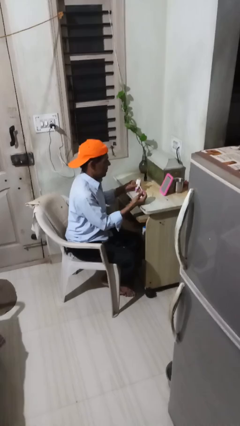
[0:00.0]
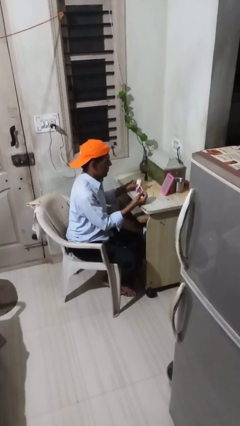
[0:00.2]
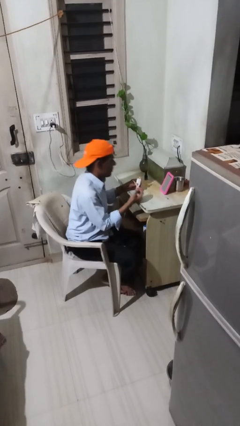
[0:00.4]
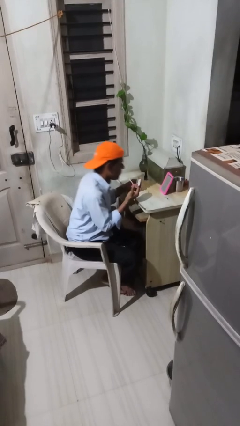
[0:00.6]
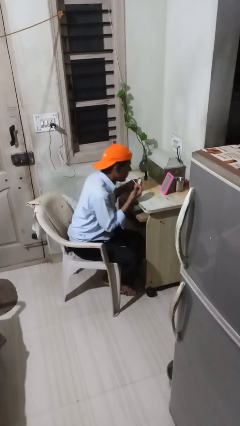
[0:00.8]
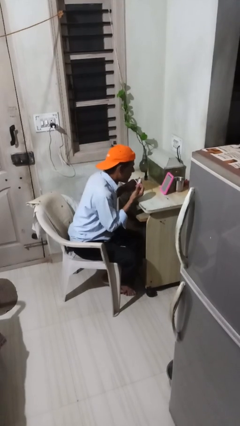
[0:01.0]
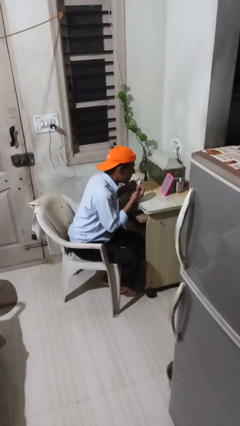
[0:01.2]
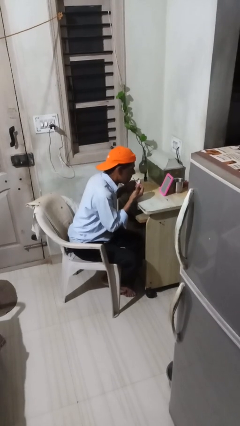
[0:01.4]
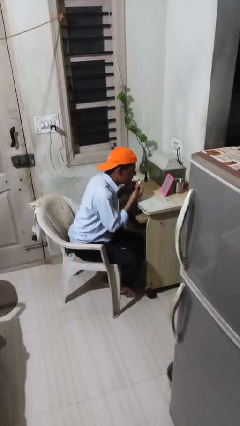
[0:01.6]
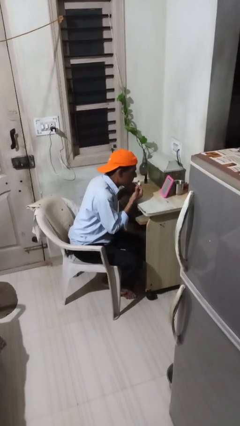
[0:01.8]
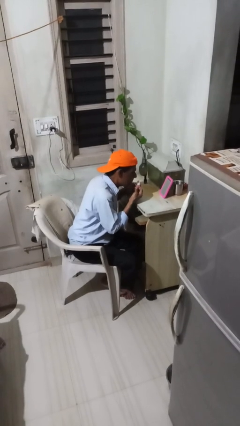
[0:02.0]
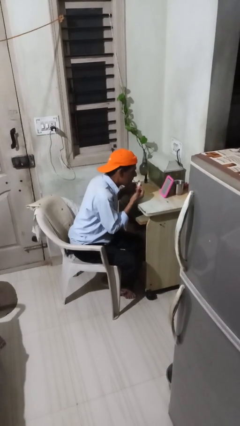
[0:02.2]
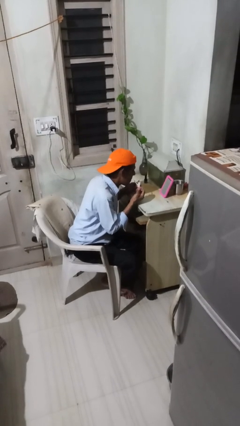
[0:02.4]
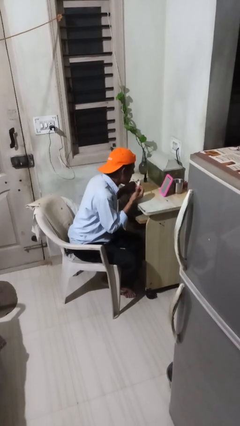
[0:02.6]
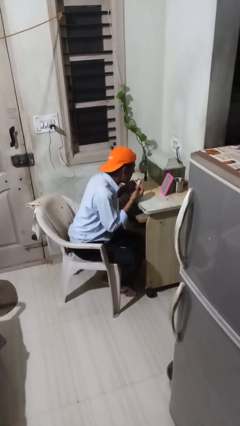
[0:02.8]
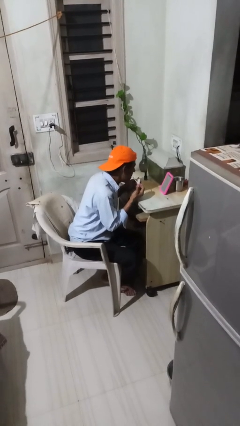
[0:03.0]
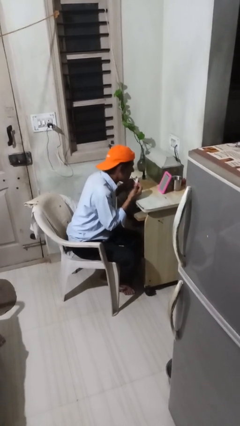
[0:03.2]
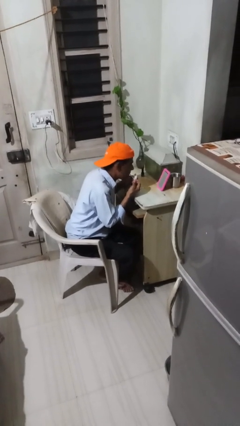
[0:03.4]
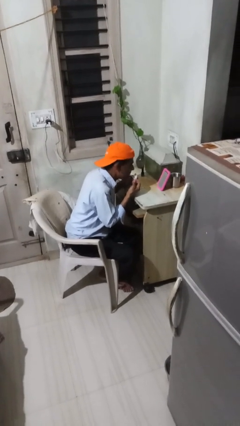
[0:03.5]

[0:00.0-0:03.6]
person applies lip makeup

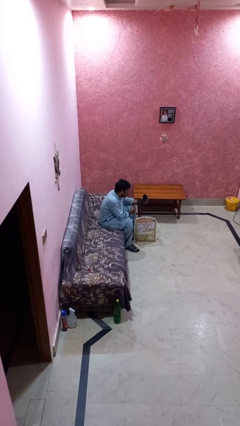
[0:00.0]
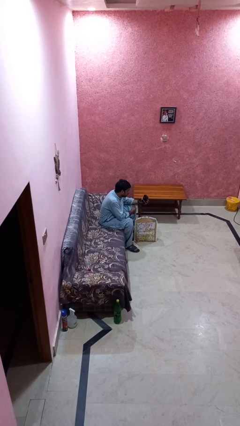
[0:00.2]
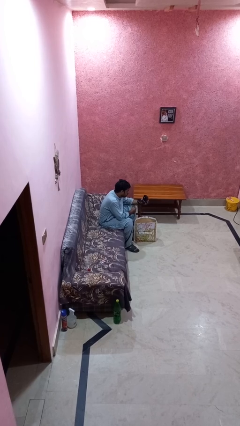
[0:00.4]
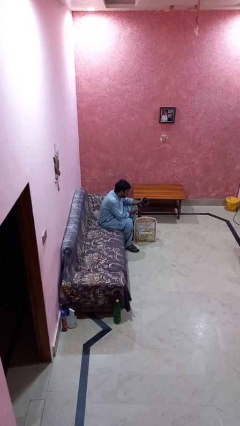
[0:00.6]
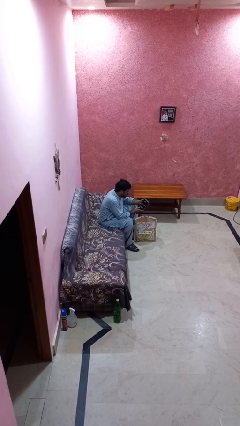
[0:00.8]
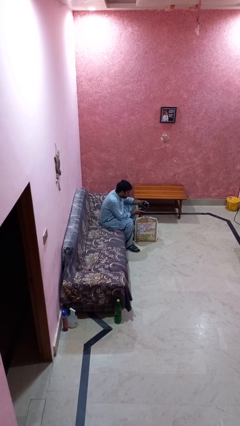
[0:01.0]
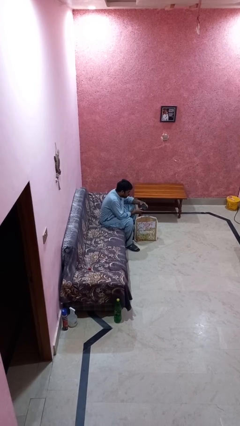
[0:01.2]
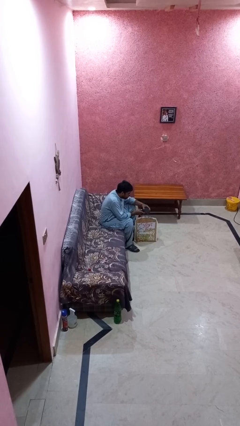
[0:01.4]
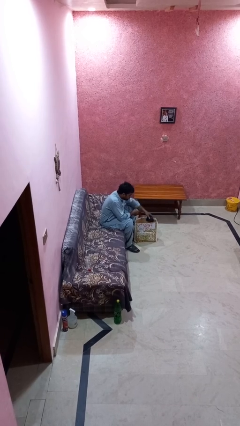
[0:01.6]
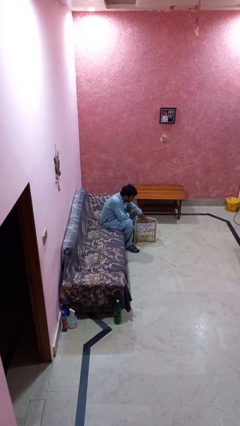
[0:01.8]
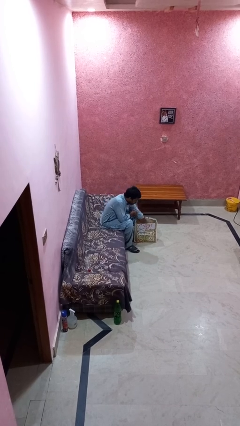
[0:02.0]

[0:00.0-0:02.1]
person puts object into bag

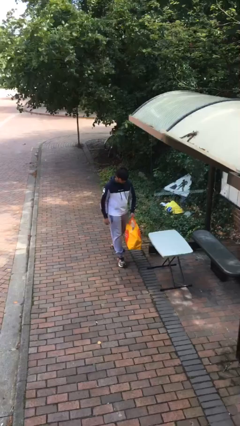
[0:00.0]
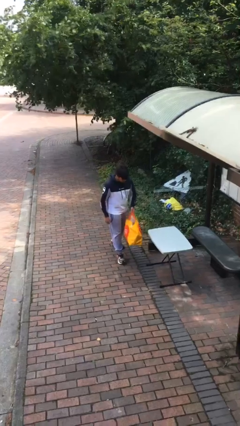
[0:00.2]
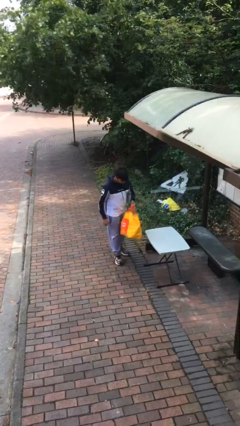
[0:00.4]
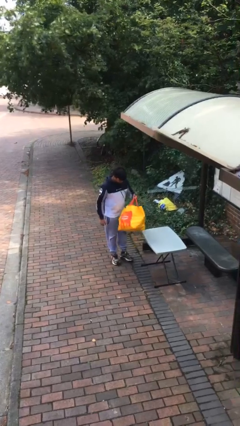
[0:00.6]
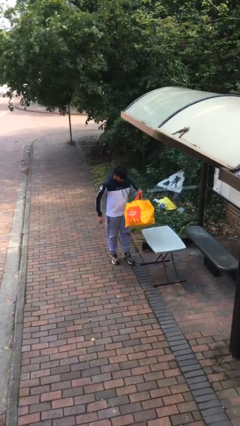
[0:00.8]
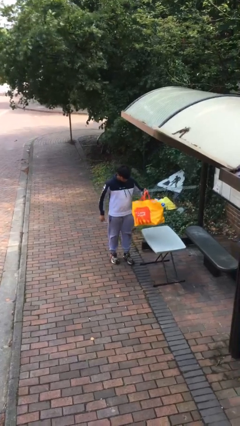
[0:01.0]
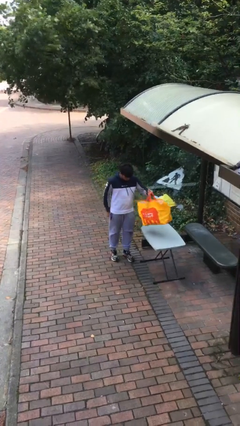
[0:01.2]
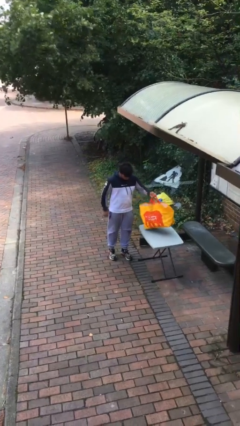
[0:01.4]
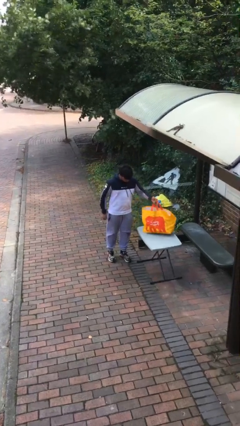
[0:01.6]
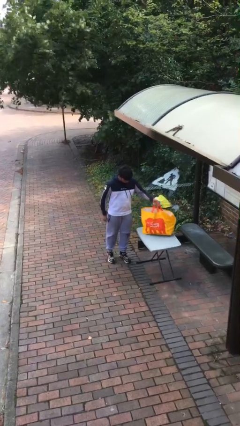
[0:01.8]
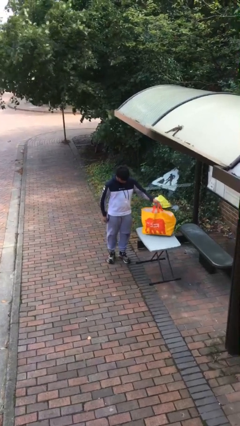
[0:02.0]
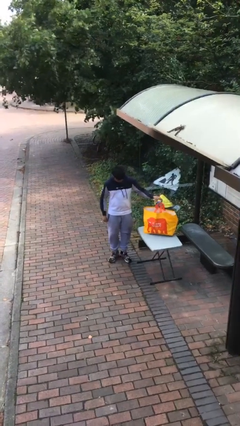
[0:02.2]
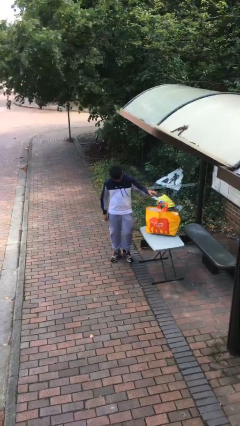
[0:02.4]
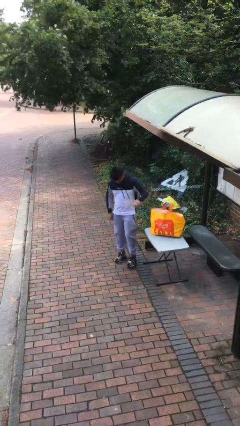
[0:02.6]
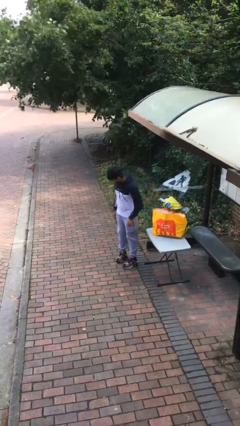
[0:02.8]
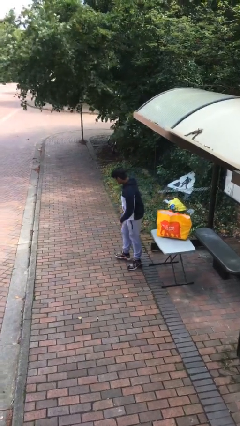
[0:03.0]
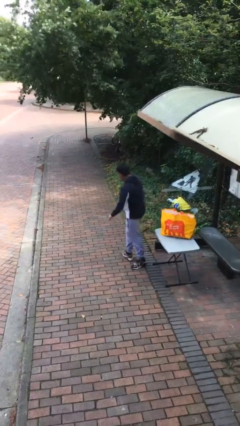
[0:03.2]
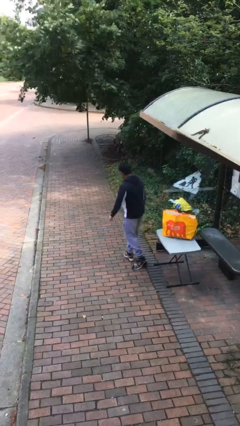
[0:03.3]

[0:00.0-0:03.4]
person puts down object on table

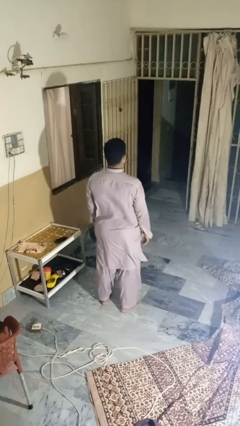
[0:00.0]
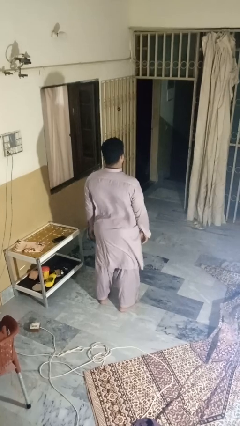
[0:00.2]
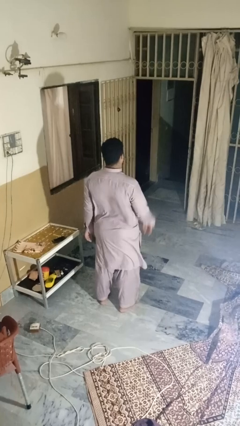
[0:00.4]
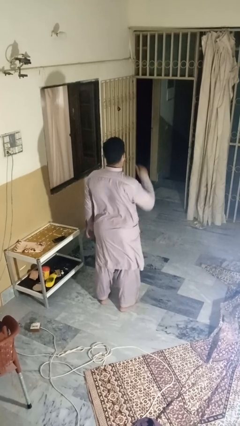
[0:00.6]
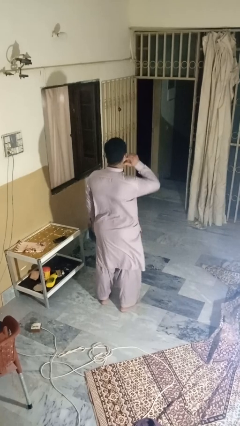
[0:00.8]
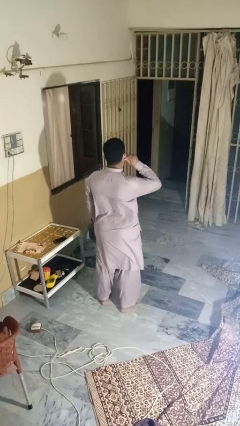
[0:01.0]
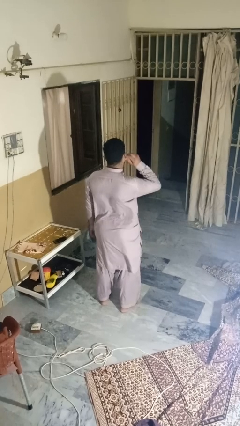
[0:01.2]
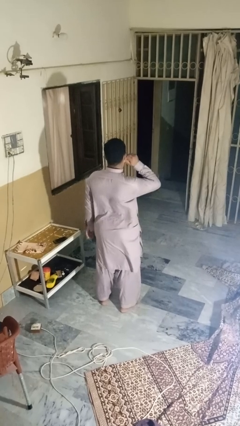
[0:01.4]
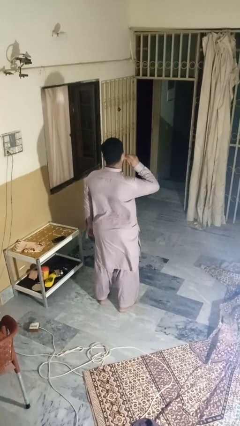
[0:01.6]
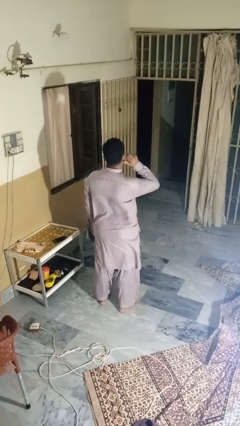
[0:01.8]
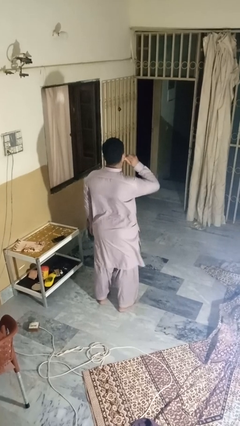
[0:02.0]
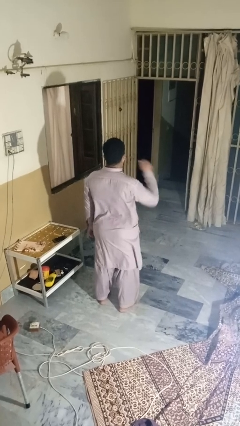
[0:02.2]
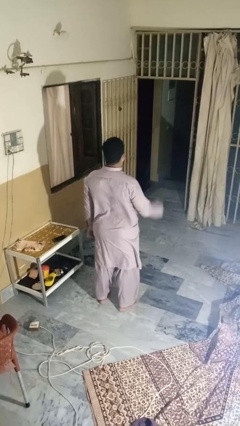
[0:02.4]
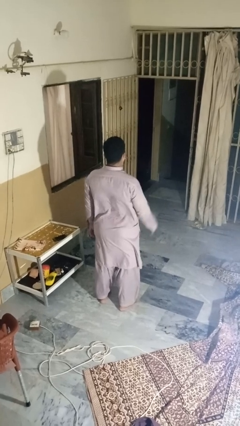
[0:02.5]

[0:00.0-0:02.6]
person touches earlobe

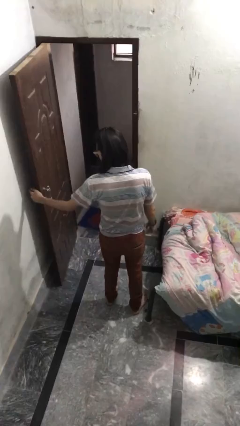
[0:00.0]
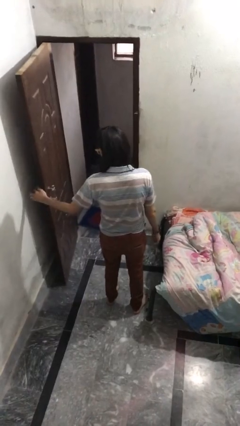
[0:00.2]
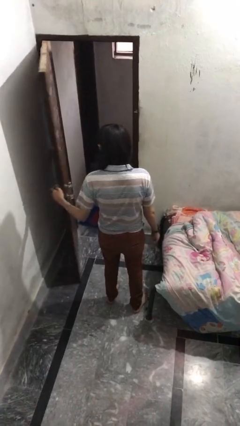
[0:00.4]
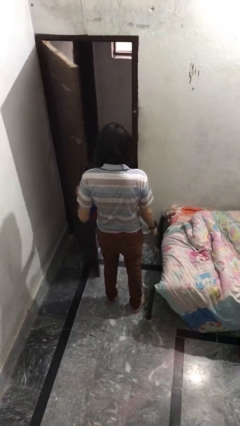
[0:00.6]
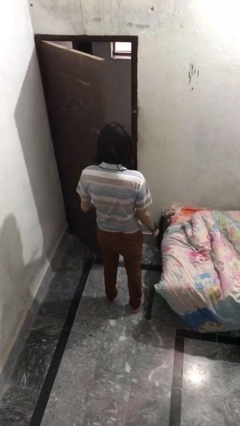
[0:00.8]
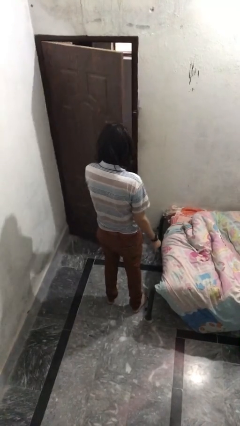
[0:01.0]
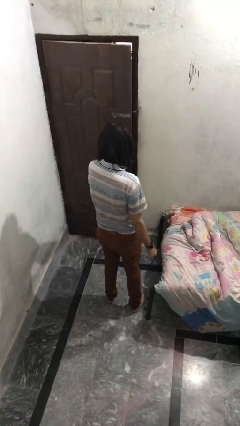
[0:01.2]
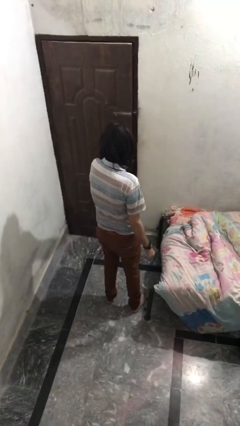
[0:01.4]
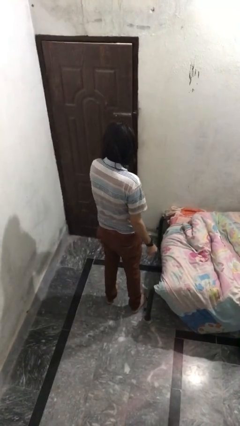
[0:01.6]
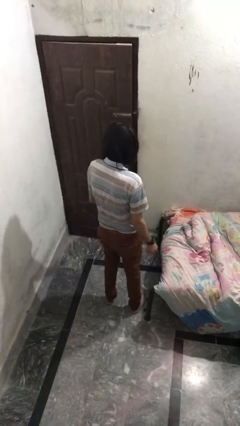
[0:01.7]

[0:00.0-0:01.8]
person closes facility door

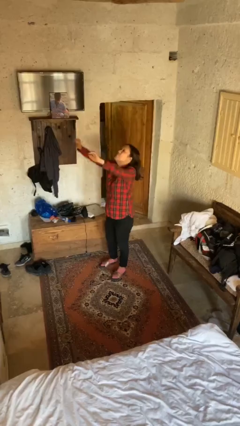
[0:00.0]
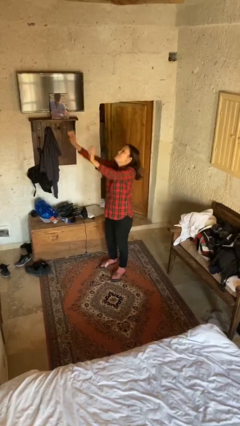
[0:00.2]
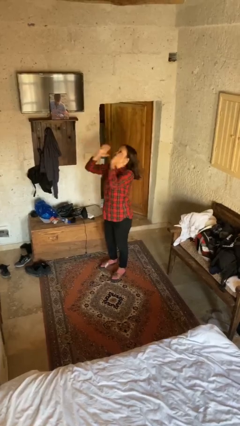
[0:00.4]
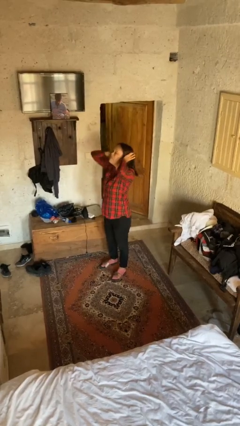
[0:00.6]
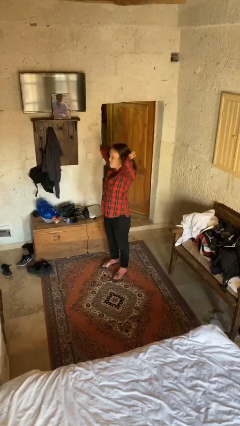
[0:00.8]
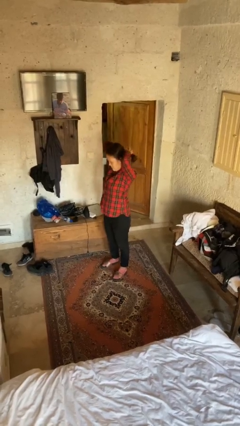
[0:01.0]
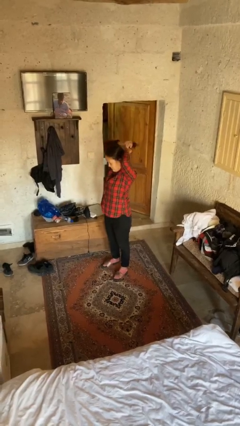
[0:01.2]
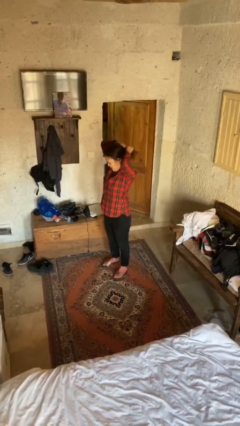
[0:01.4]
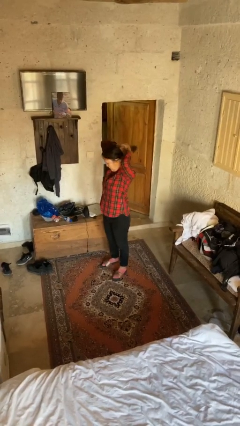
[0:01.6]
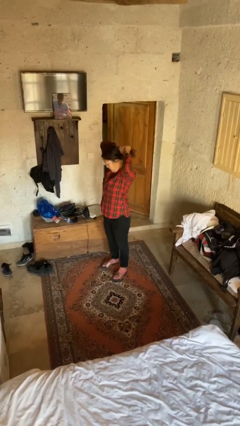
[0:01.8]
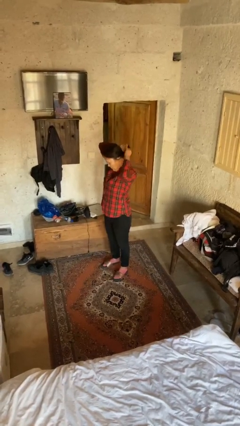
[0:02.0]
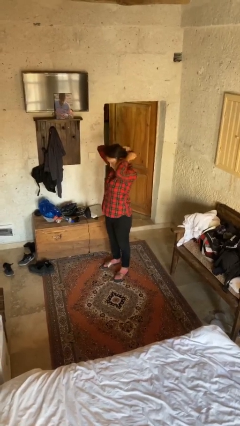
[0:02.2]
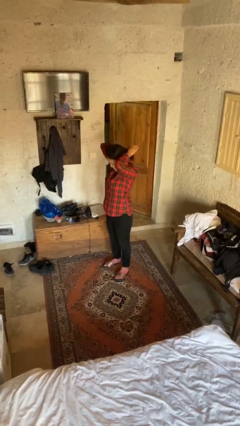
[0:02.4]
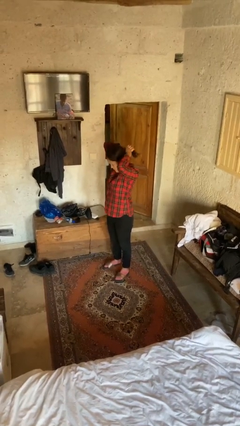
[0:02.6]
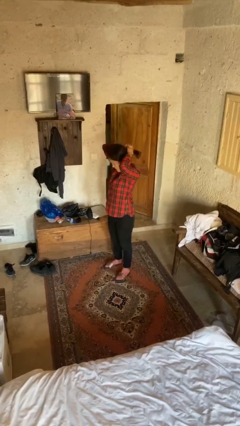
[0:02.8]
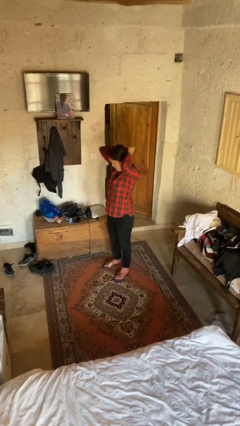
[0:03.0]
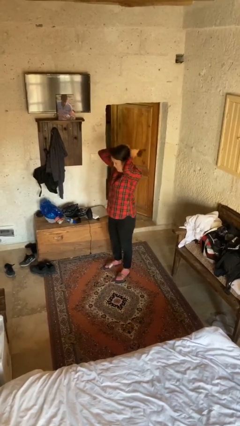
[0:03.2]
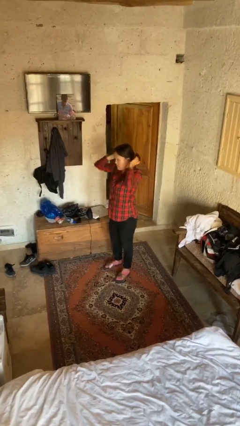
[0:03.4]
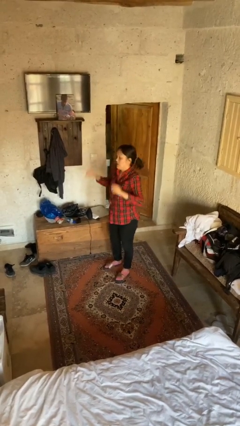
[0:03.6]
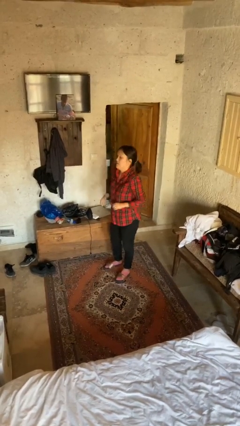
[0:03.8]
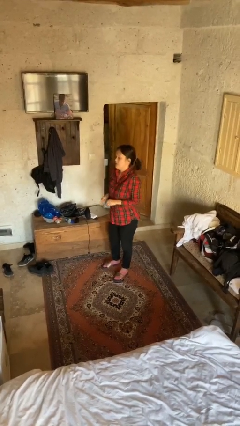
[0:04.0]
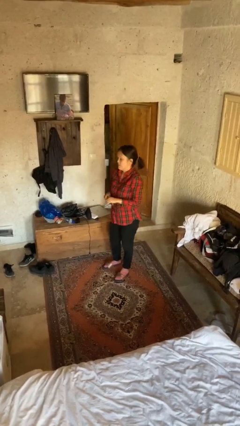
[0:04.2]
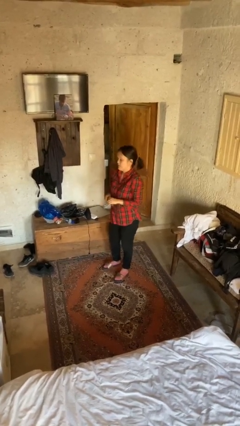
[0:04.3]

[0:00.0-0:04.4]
person puts hair in ponytail
